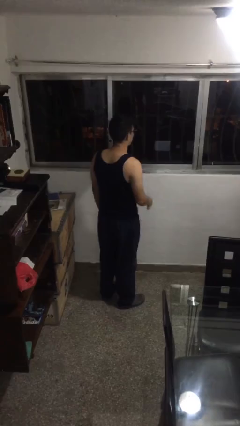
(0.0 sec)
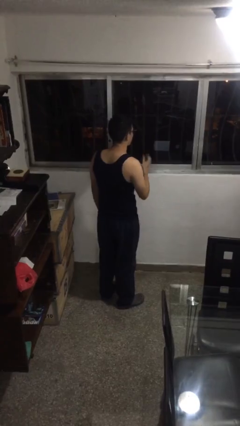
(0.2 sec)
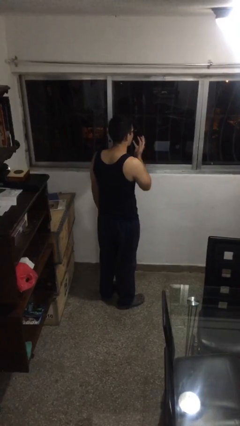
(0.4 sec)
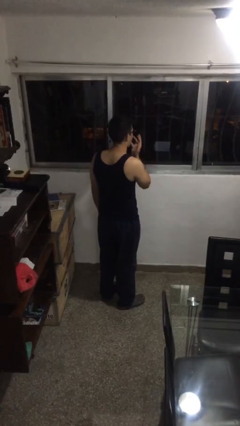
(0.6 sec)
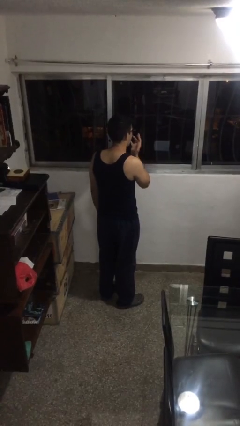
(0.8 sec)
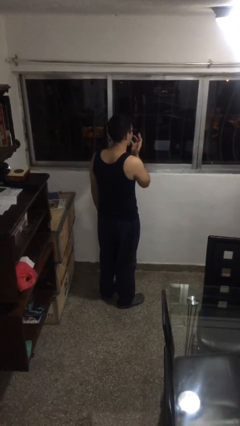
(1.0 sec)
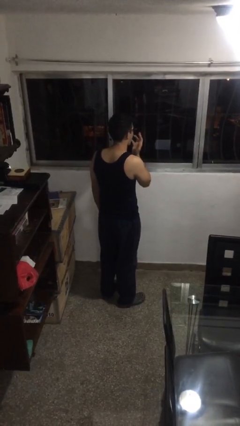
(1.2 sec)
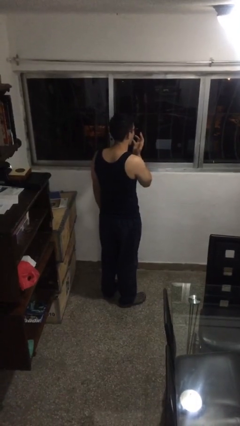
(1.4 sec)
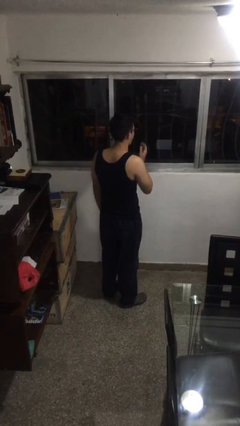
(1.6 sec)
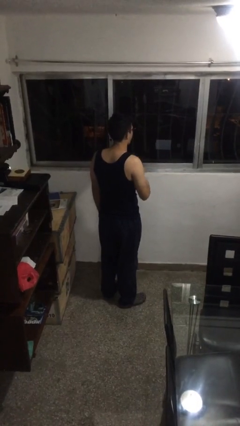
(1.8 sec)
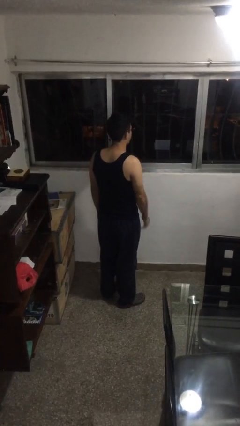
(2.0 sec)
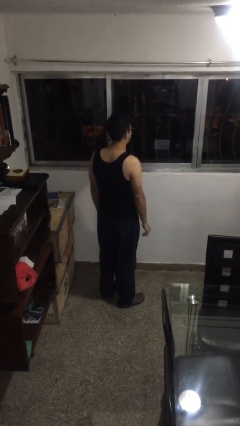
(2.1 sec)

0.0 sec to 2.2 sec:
person licks fingers

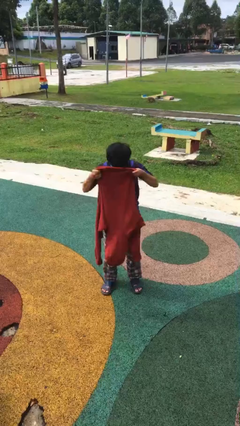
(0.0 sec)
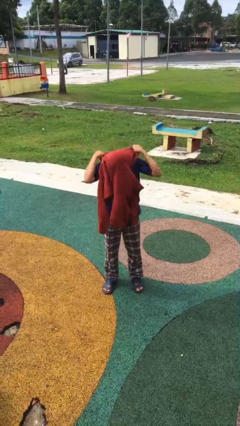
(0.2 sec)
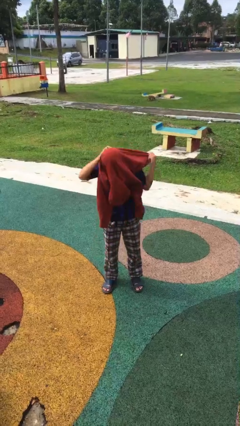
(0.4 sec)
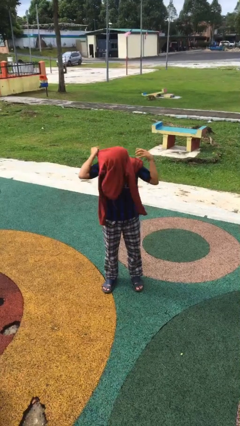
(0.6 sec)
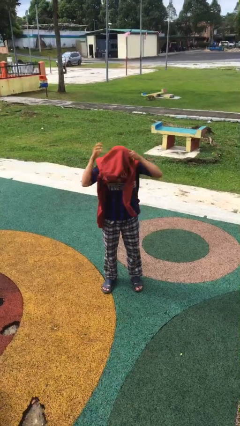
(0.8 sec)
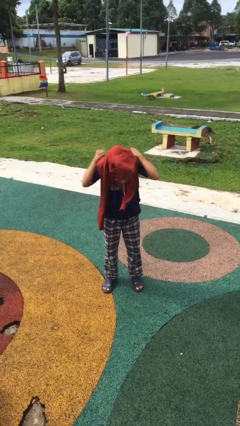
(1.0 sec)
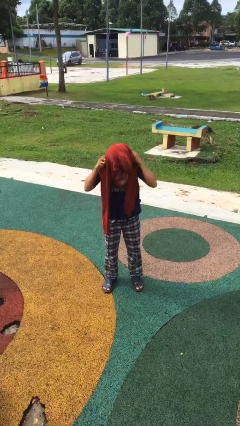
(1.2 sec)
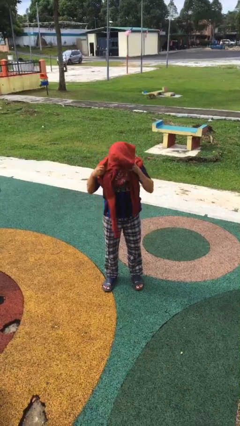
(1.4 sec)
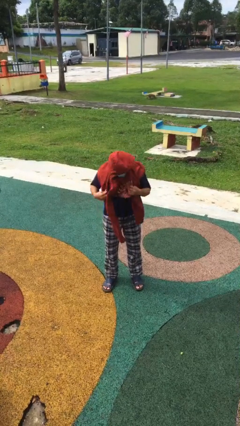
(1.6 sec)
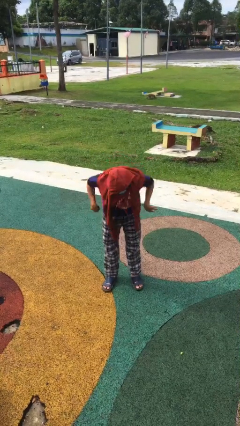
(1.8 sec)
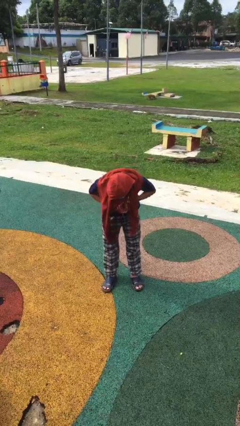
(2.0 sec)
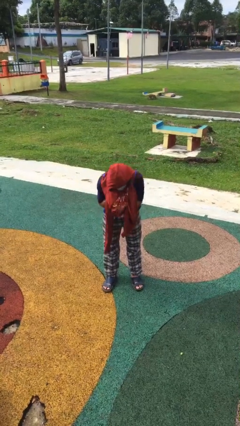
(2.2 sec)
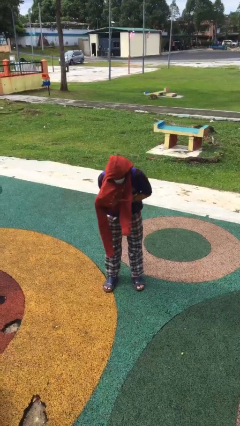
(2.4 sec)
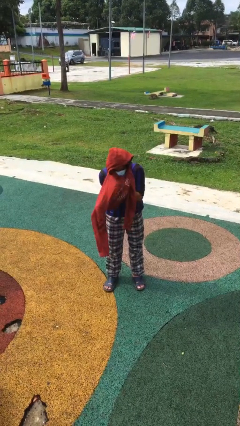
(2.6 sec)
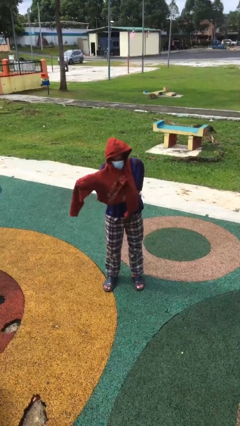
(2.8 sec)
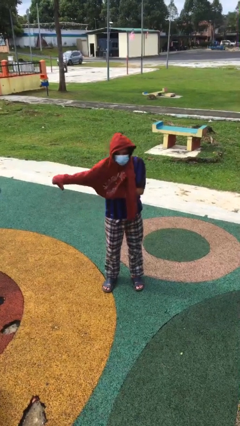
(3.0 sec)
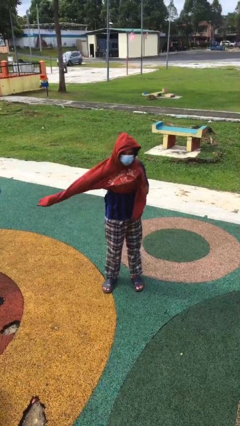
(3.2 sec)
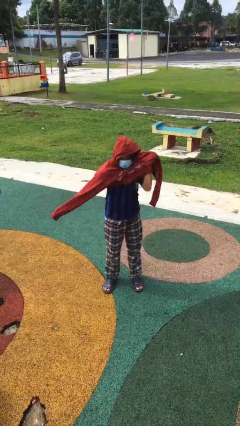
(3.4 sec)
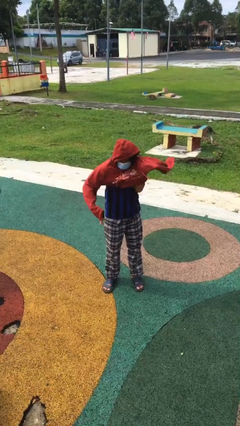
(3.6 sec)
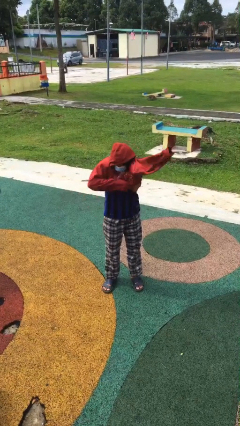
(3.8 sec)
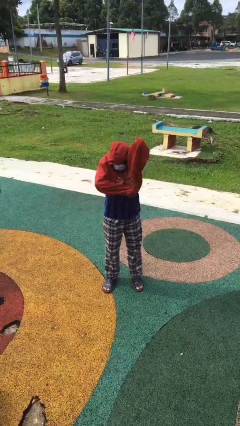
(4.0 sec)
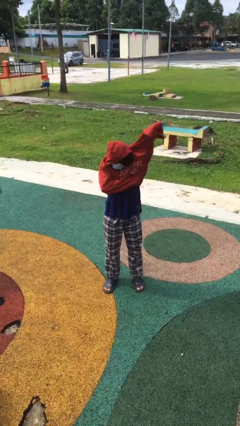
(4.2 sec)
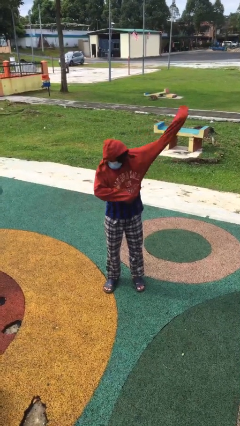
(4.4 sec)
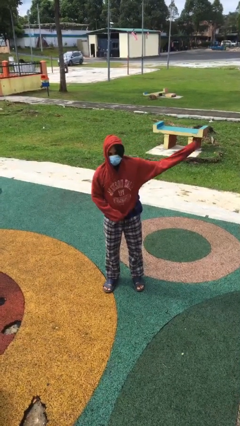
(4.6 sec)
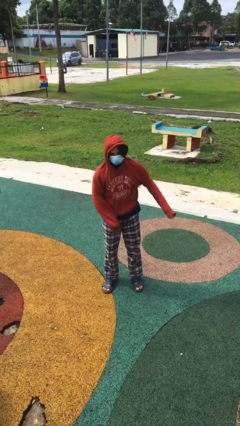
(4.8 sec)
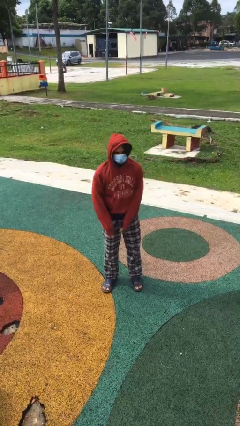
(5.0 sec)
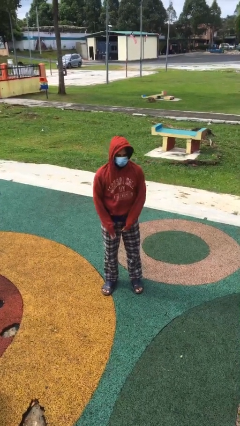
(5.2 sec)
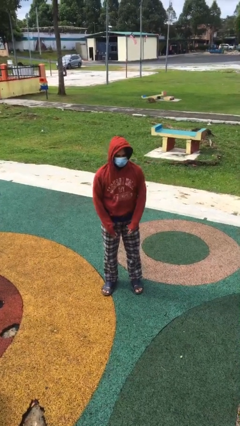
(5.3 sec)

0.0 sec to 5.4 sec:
person puts on hoodie

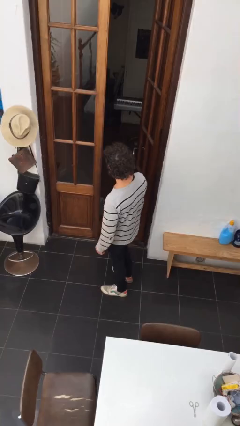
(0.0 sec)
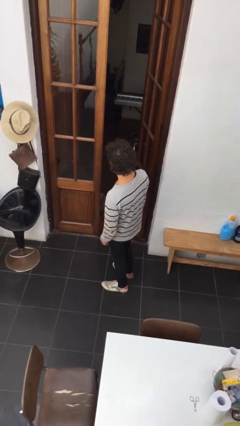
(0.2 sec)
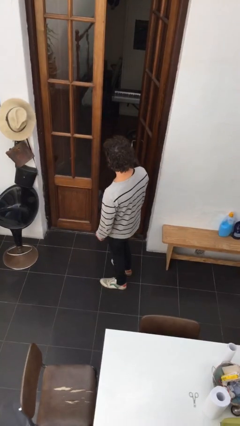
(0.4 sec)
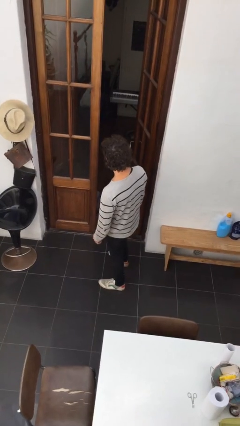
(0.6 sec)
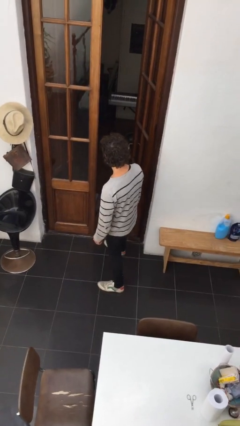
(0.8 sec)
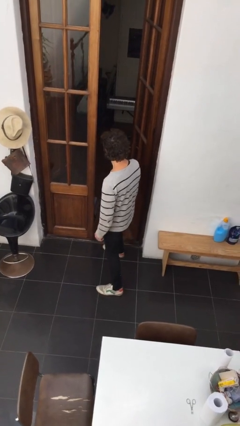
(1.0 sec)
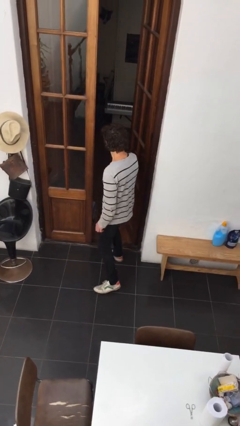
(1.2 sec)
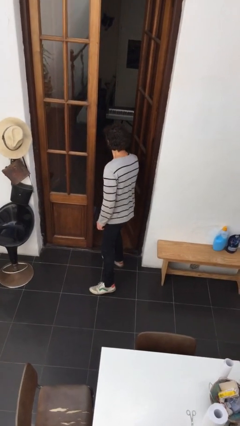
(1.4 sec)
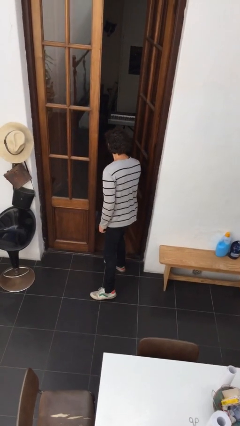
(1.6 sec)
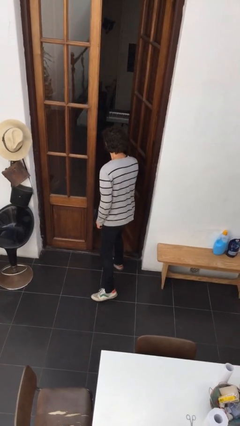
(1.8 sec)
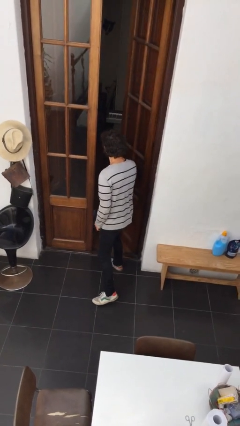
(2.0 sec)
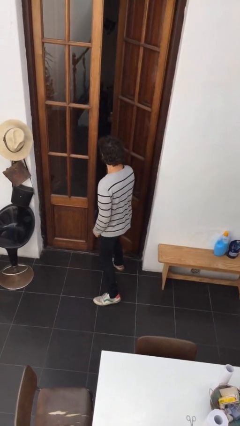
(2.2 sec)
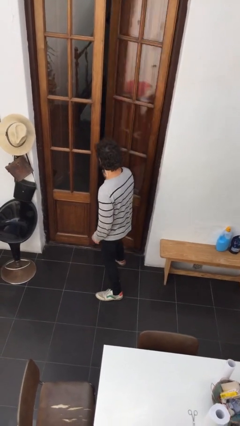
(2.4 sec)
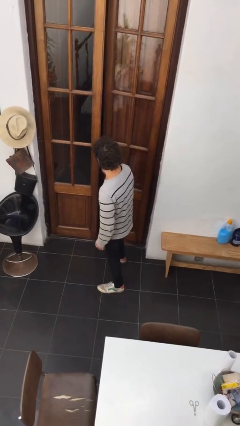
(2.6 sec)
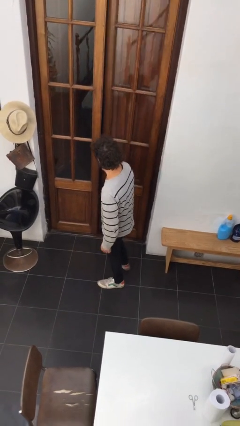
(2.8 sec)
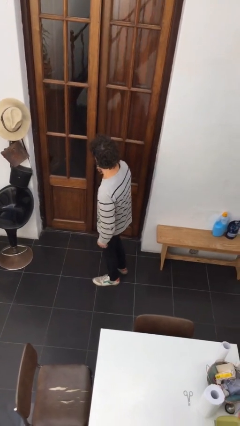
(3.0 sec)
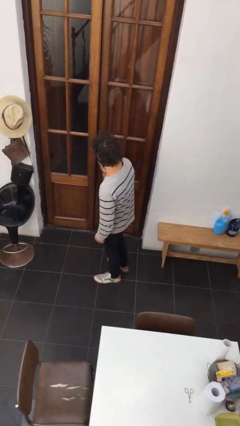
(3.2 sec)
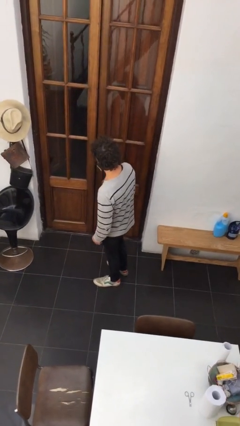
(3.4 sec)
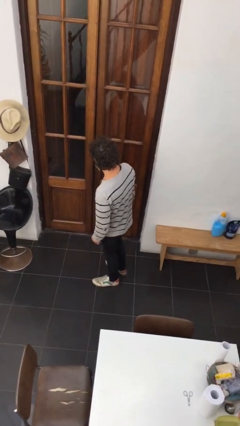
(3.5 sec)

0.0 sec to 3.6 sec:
person closes facility door

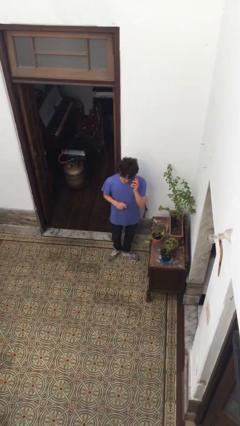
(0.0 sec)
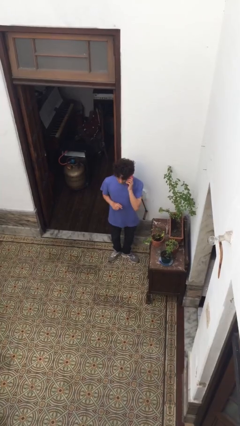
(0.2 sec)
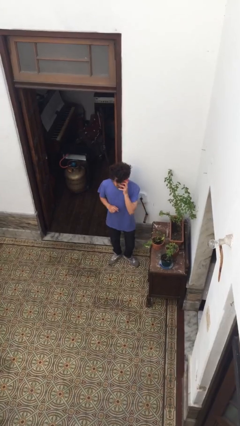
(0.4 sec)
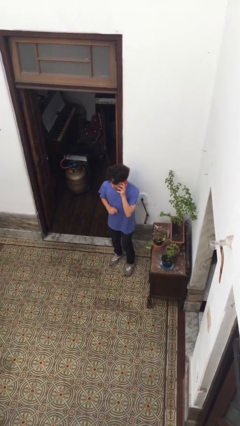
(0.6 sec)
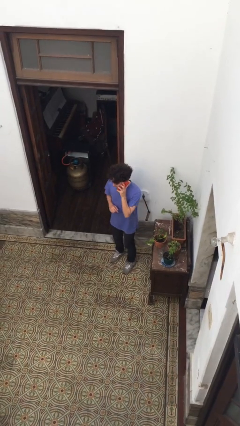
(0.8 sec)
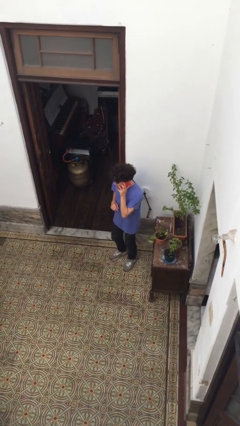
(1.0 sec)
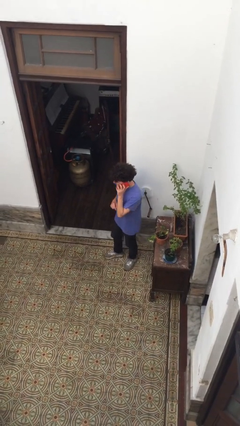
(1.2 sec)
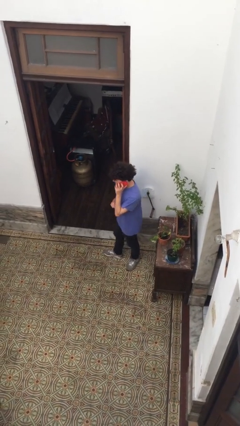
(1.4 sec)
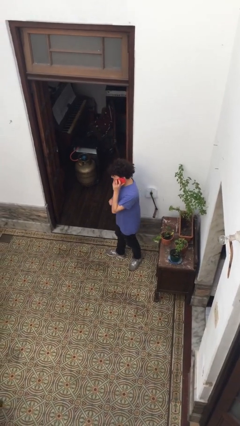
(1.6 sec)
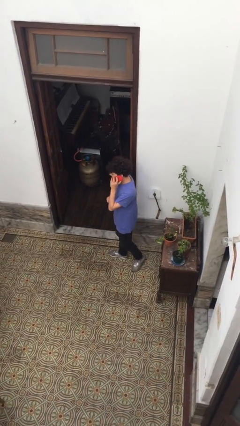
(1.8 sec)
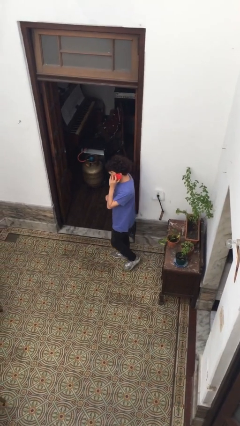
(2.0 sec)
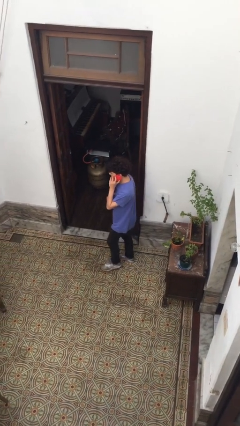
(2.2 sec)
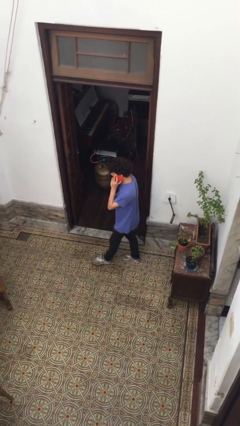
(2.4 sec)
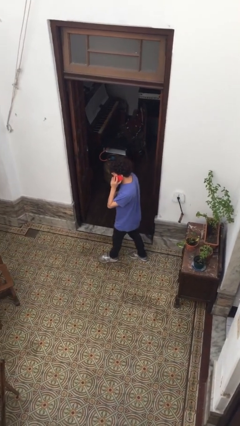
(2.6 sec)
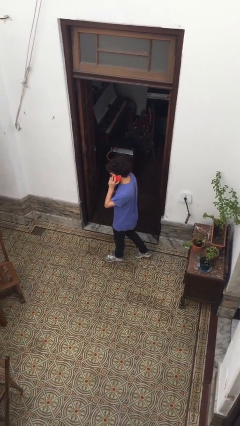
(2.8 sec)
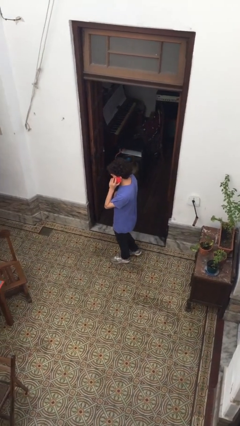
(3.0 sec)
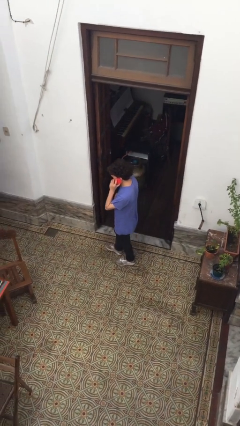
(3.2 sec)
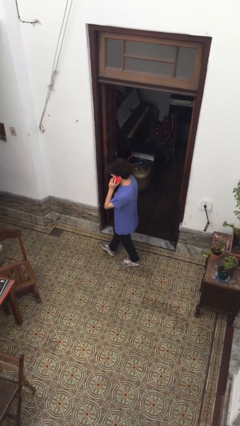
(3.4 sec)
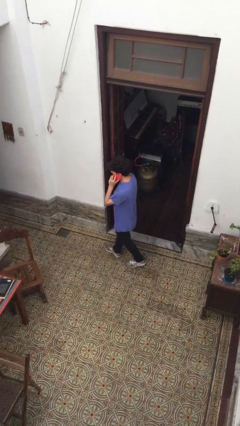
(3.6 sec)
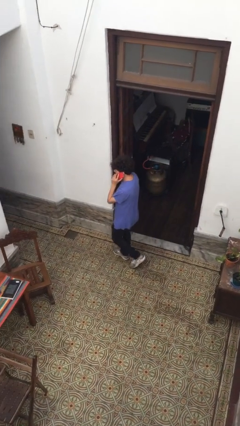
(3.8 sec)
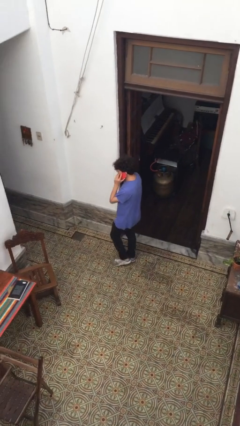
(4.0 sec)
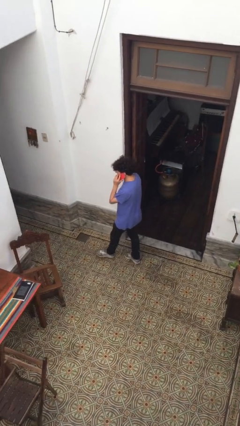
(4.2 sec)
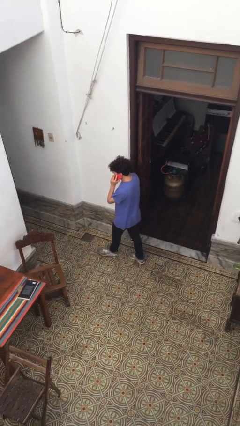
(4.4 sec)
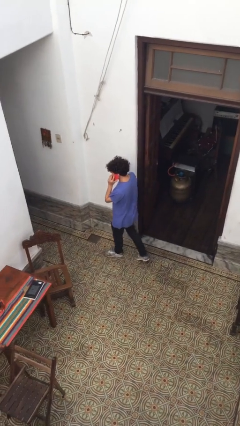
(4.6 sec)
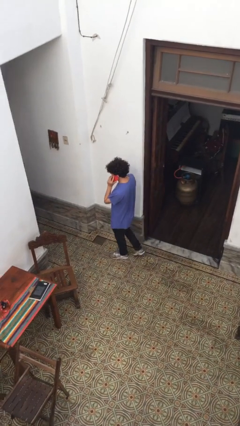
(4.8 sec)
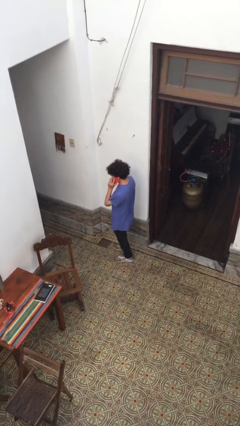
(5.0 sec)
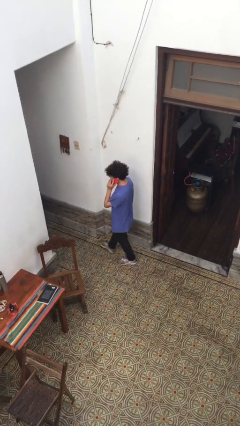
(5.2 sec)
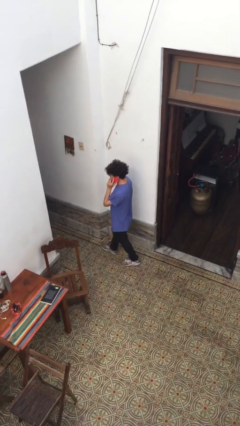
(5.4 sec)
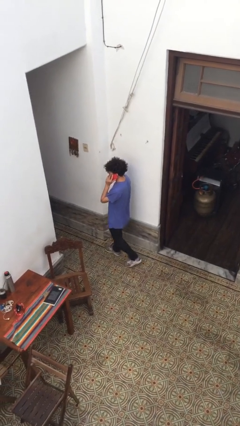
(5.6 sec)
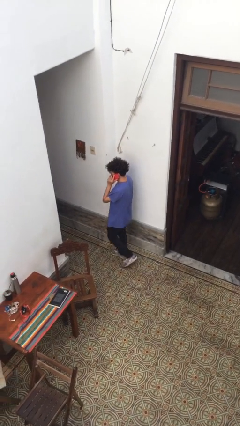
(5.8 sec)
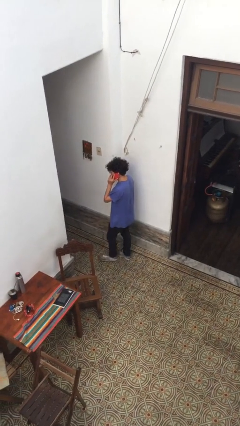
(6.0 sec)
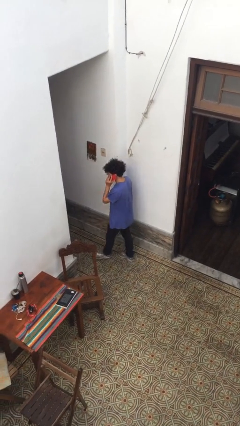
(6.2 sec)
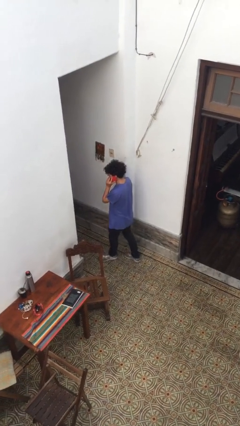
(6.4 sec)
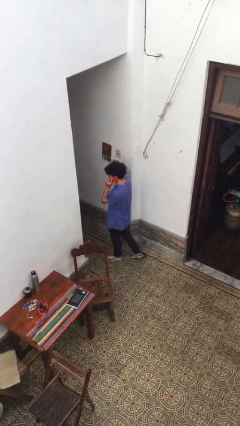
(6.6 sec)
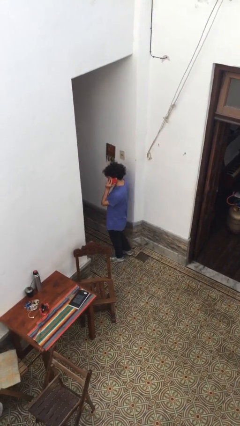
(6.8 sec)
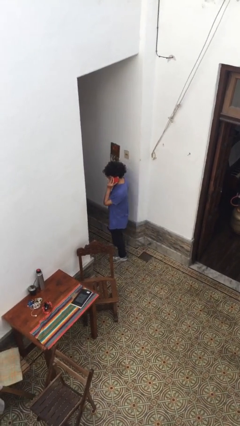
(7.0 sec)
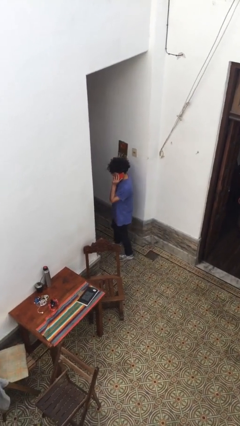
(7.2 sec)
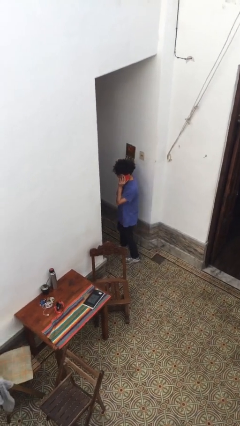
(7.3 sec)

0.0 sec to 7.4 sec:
person talks on phone
